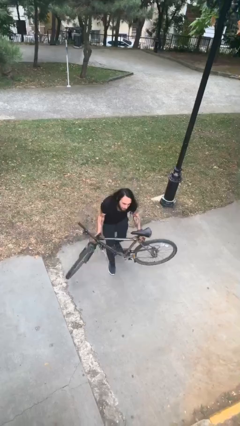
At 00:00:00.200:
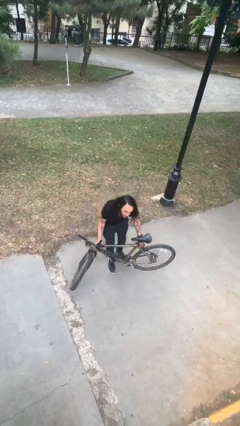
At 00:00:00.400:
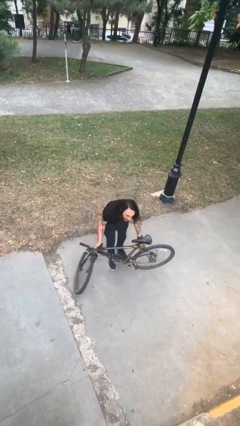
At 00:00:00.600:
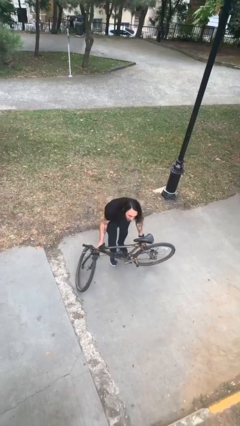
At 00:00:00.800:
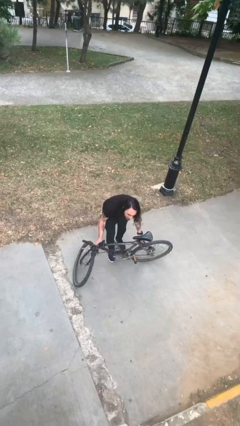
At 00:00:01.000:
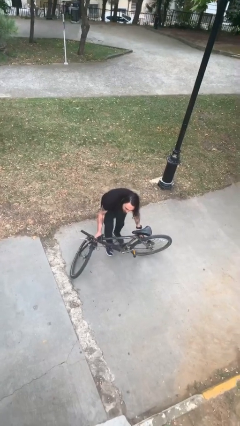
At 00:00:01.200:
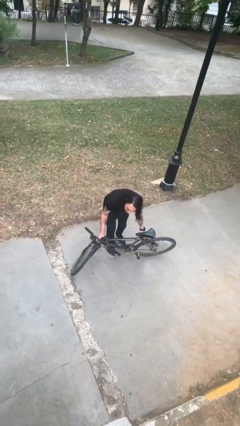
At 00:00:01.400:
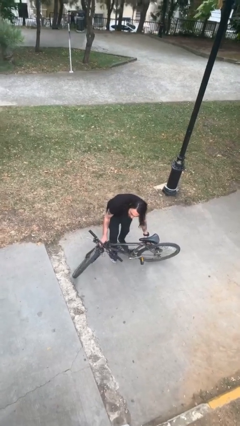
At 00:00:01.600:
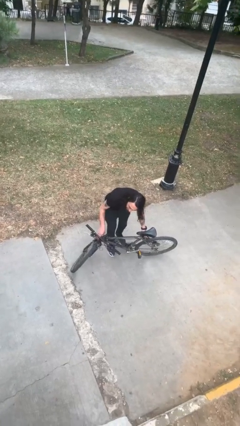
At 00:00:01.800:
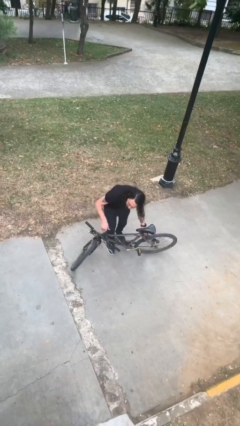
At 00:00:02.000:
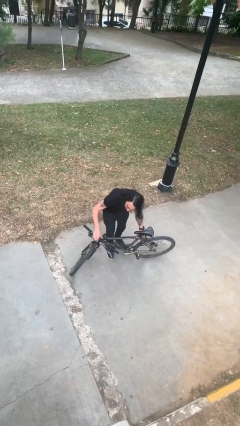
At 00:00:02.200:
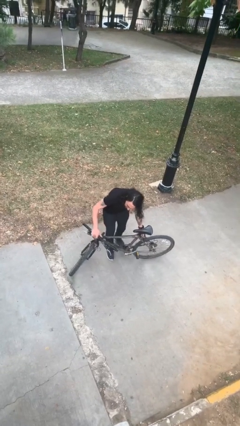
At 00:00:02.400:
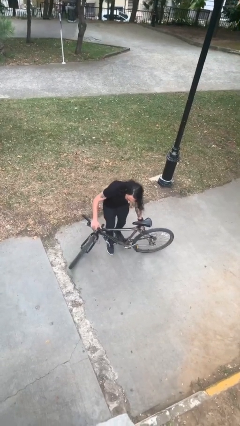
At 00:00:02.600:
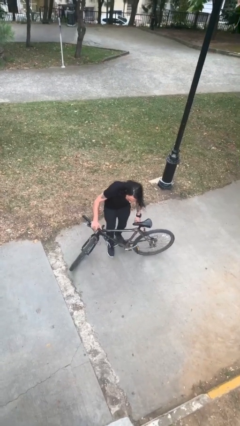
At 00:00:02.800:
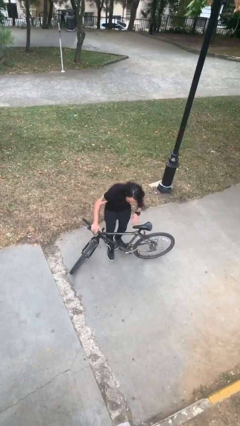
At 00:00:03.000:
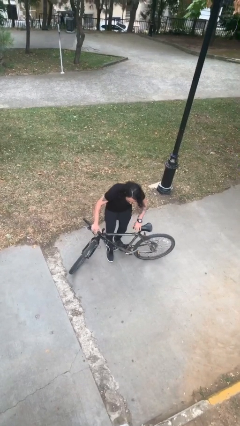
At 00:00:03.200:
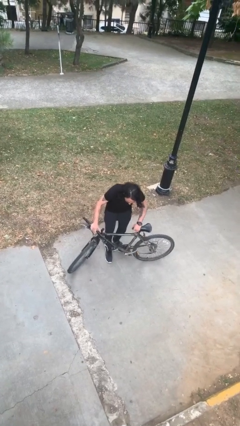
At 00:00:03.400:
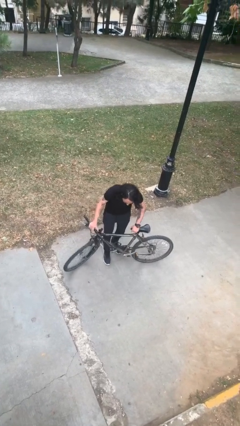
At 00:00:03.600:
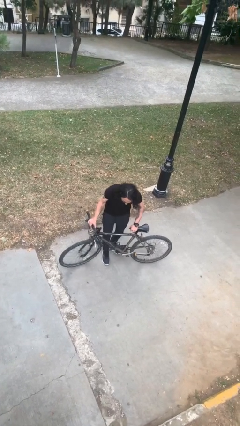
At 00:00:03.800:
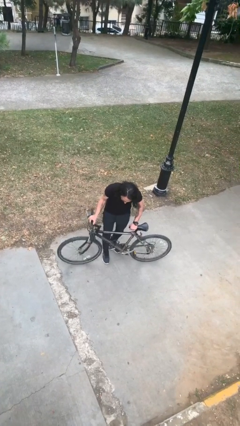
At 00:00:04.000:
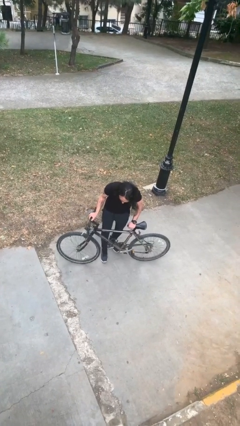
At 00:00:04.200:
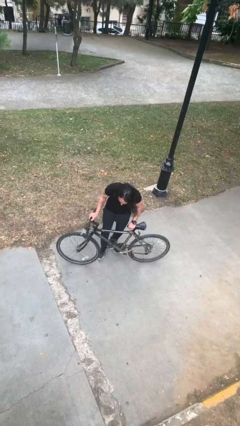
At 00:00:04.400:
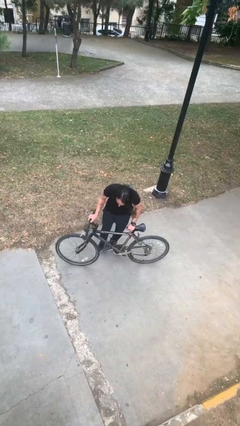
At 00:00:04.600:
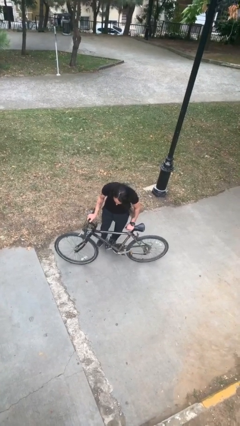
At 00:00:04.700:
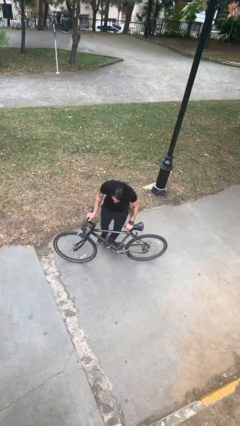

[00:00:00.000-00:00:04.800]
person puts down object on floor

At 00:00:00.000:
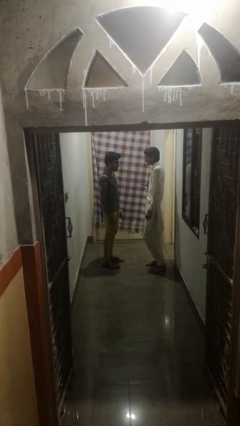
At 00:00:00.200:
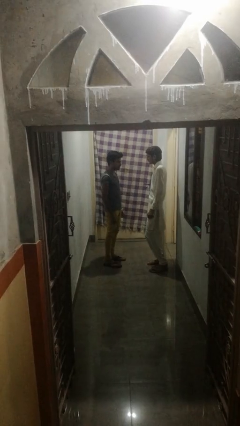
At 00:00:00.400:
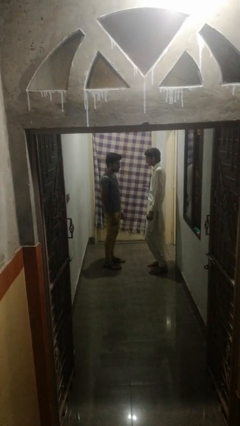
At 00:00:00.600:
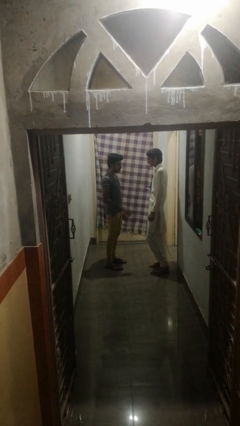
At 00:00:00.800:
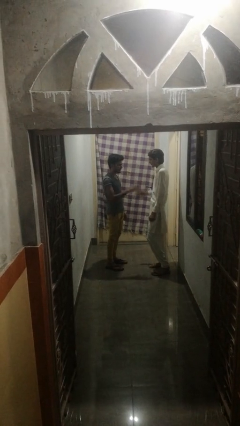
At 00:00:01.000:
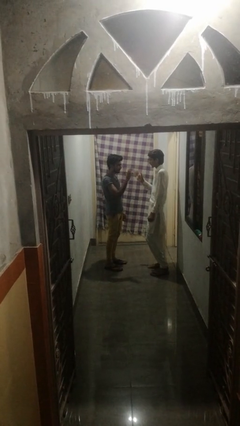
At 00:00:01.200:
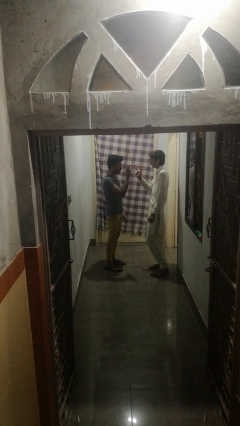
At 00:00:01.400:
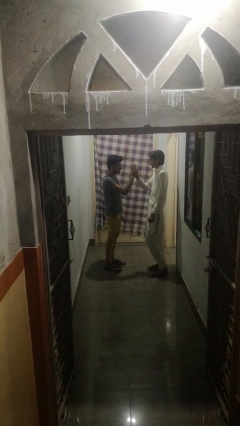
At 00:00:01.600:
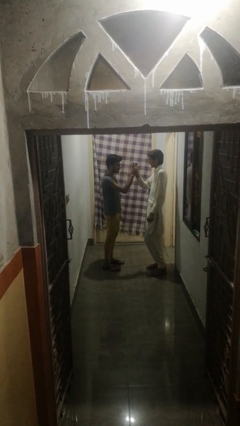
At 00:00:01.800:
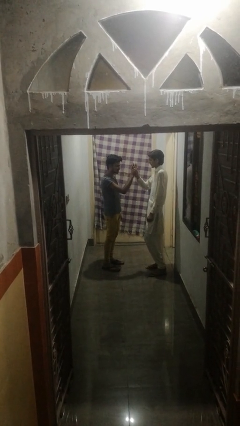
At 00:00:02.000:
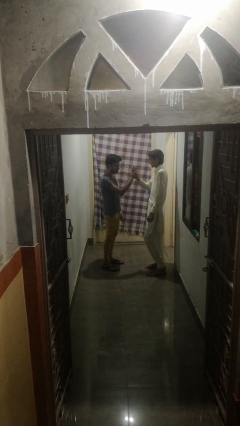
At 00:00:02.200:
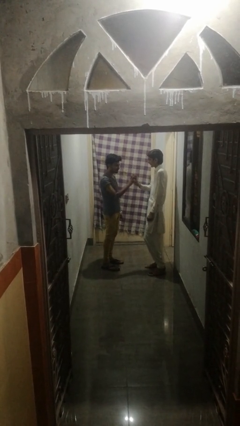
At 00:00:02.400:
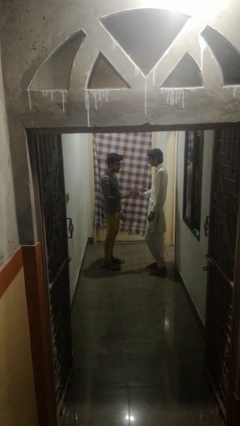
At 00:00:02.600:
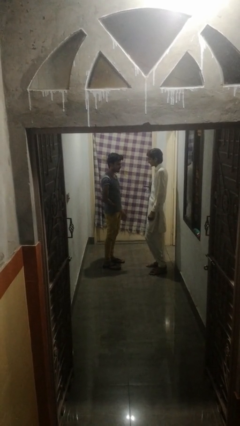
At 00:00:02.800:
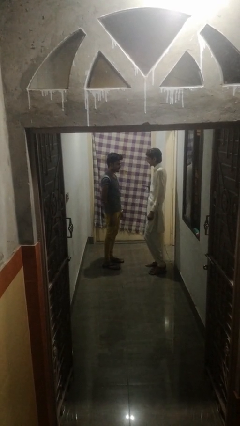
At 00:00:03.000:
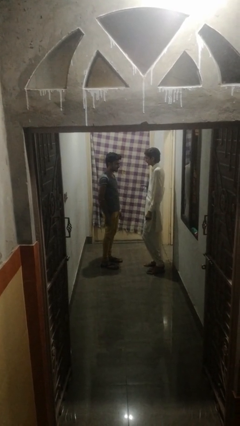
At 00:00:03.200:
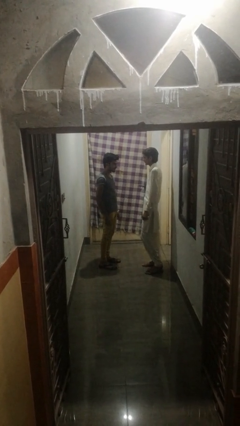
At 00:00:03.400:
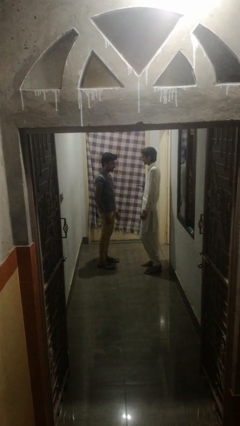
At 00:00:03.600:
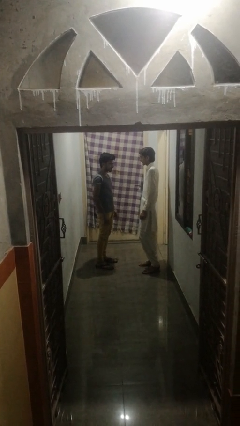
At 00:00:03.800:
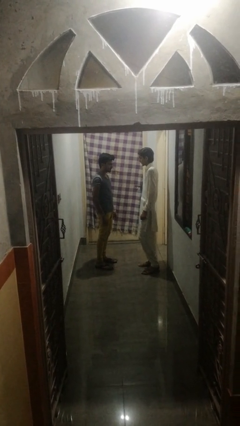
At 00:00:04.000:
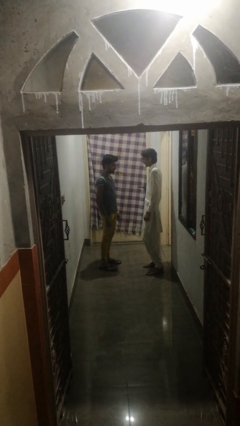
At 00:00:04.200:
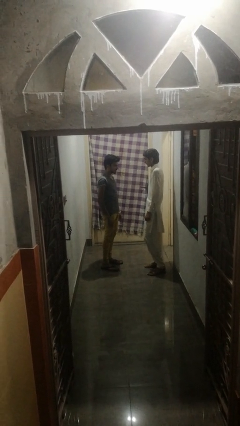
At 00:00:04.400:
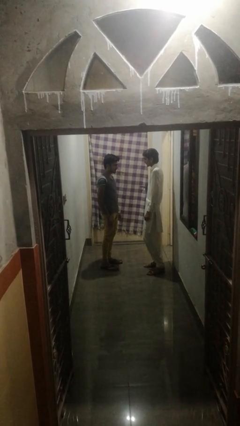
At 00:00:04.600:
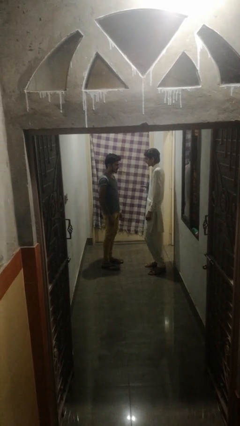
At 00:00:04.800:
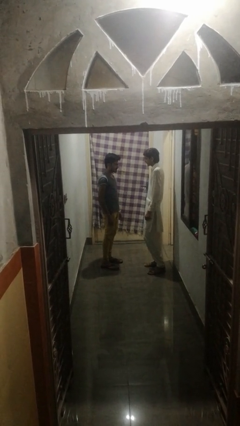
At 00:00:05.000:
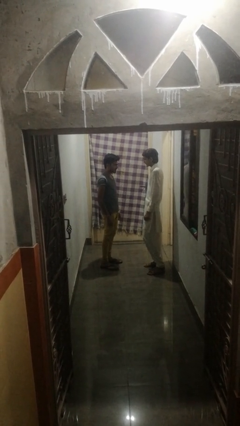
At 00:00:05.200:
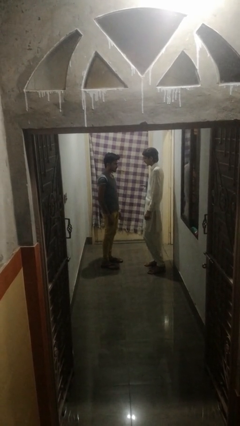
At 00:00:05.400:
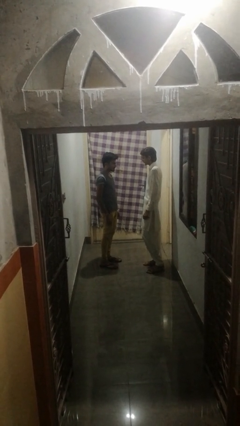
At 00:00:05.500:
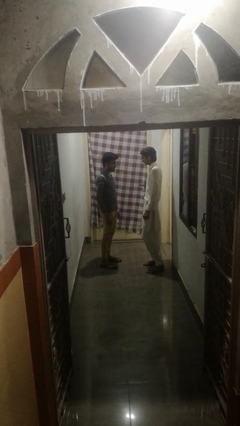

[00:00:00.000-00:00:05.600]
person highfives hand

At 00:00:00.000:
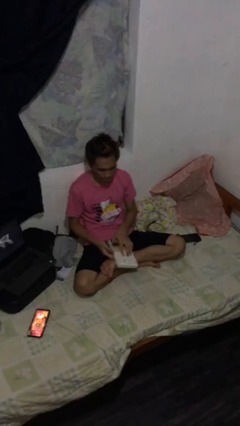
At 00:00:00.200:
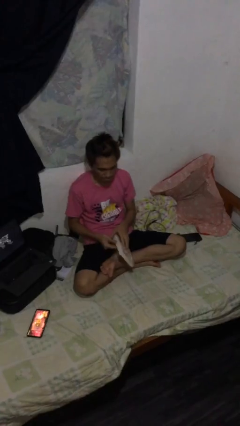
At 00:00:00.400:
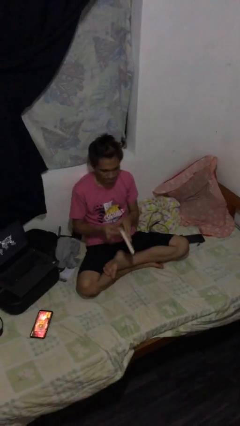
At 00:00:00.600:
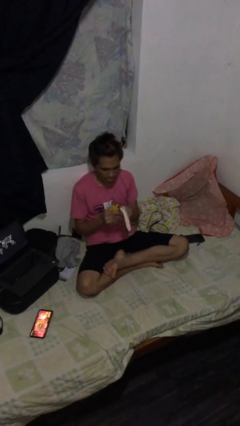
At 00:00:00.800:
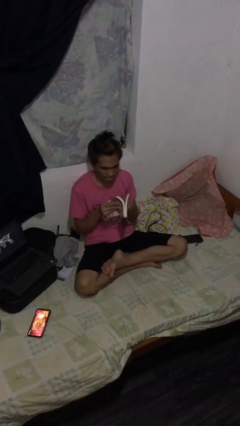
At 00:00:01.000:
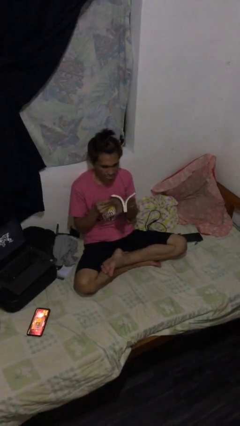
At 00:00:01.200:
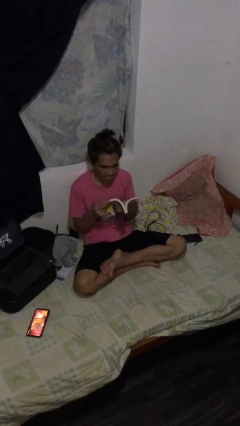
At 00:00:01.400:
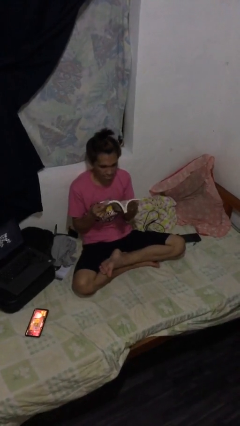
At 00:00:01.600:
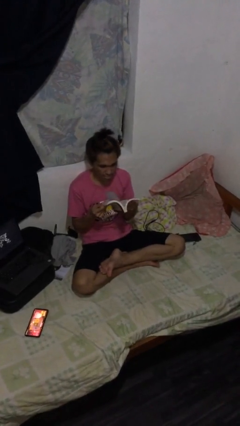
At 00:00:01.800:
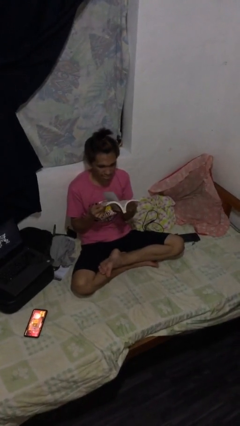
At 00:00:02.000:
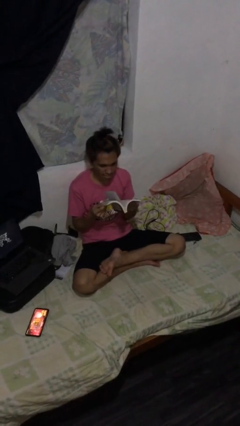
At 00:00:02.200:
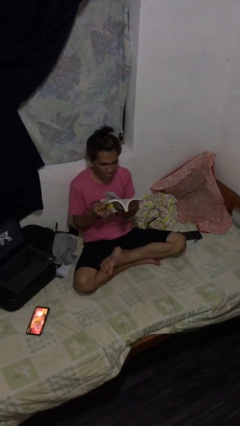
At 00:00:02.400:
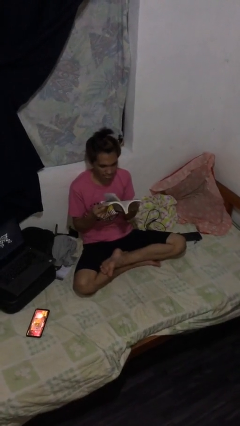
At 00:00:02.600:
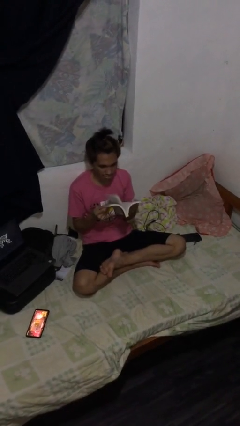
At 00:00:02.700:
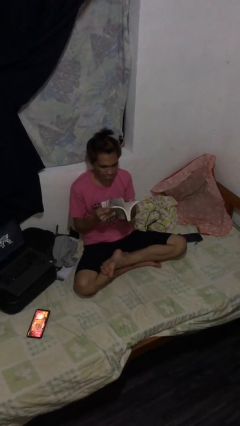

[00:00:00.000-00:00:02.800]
person reads document

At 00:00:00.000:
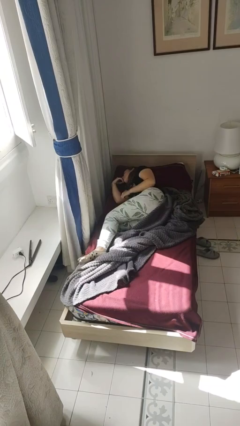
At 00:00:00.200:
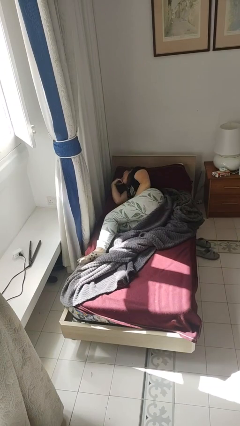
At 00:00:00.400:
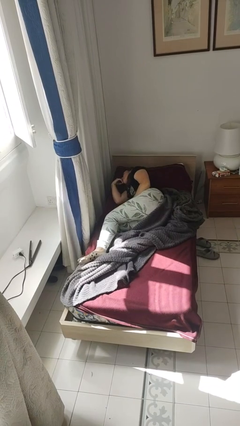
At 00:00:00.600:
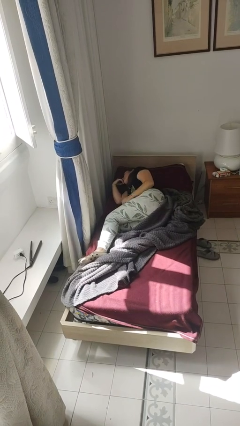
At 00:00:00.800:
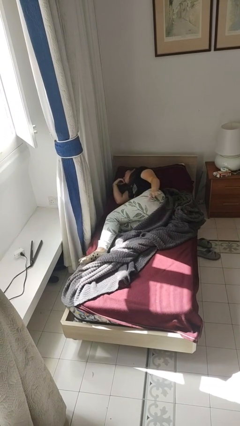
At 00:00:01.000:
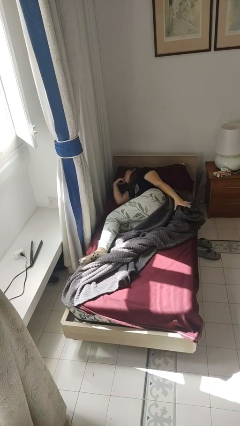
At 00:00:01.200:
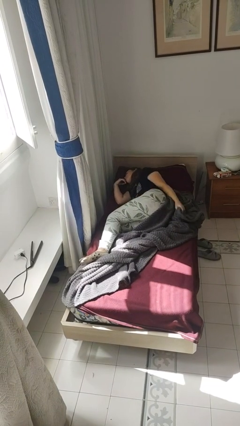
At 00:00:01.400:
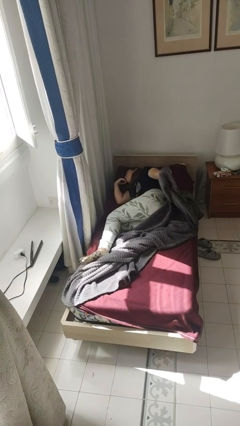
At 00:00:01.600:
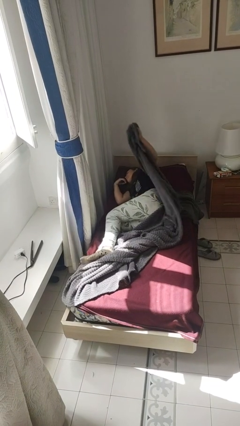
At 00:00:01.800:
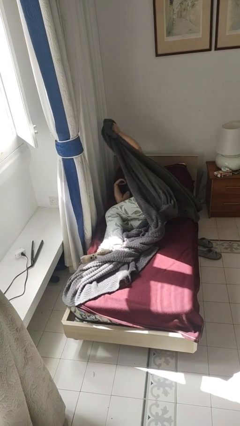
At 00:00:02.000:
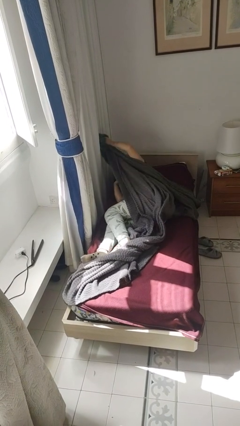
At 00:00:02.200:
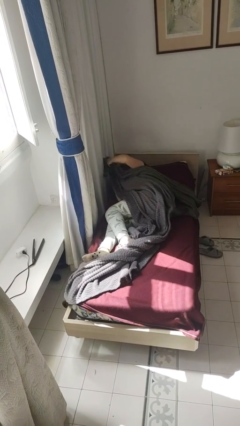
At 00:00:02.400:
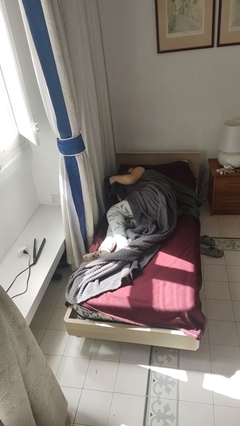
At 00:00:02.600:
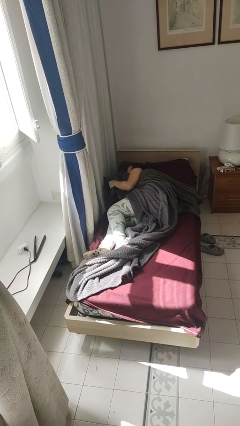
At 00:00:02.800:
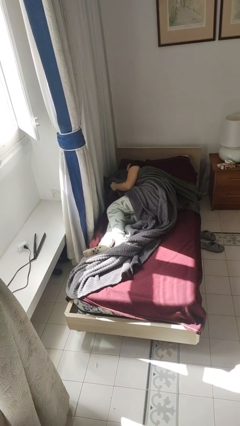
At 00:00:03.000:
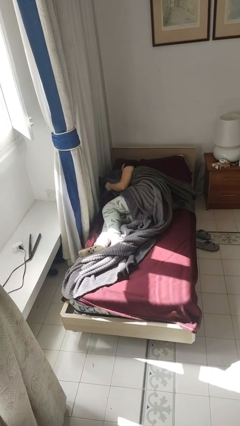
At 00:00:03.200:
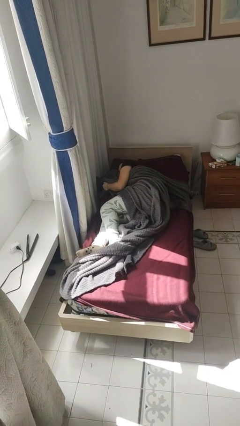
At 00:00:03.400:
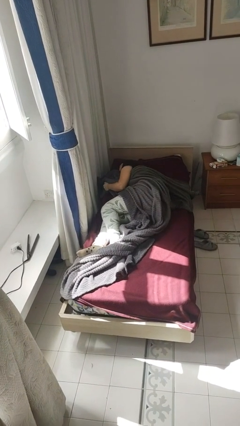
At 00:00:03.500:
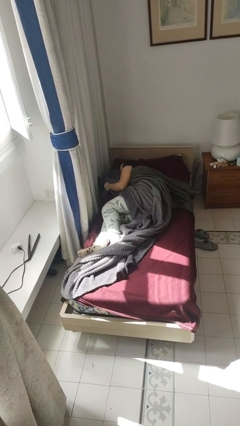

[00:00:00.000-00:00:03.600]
person covers with bedsheets

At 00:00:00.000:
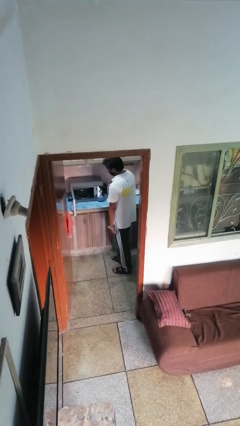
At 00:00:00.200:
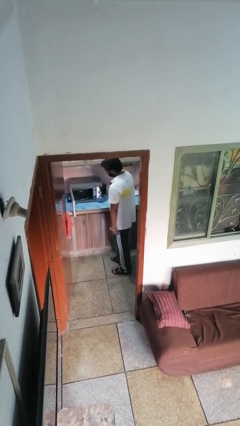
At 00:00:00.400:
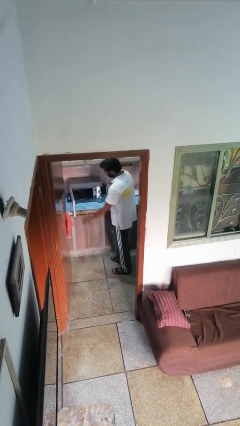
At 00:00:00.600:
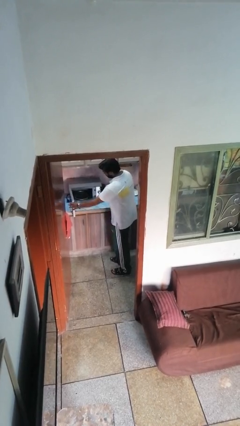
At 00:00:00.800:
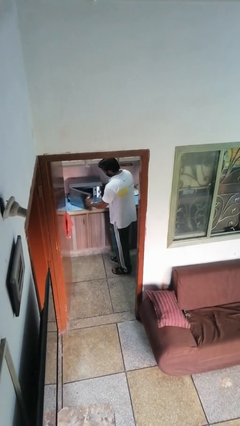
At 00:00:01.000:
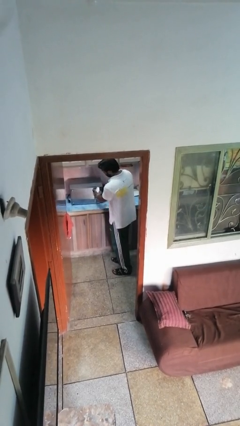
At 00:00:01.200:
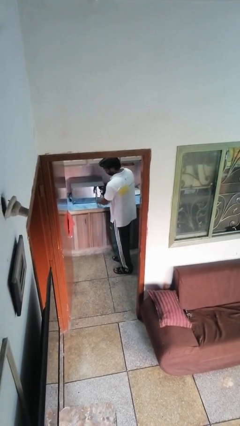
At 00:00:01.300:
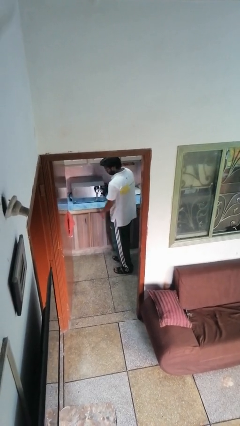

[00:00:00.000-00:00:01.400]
person closes microwave
